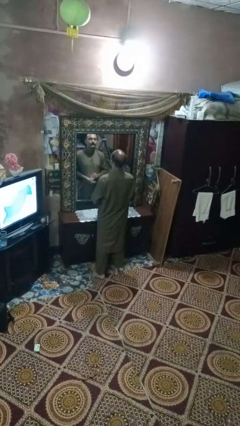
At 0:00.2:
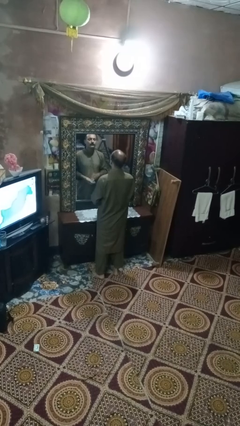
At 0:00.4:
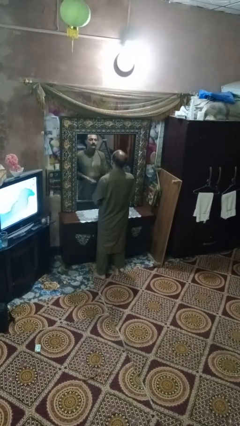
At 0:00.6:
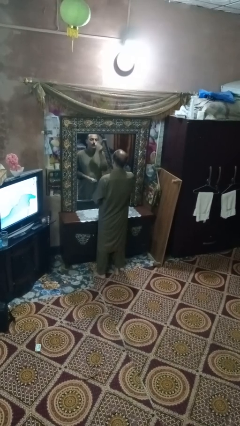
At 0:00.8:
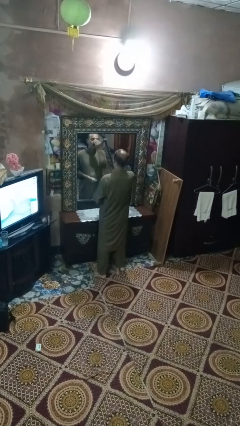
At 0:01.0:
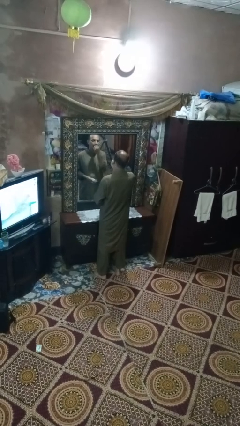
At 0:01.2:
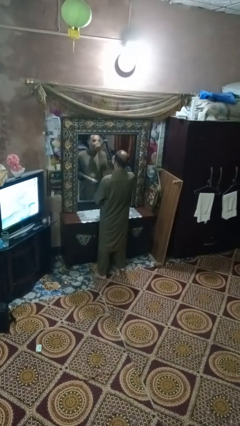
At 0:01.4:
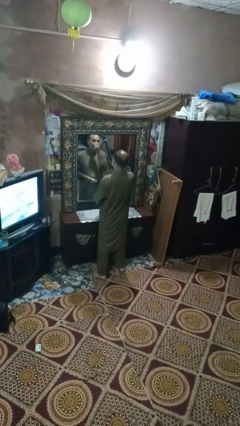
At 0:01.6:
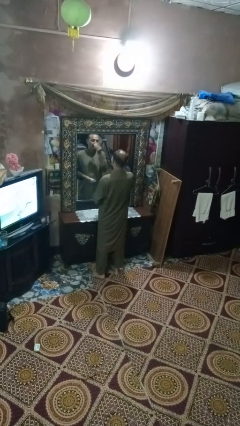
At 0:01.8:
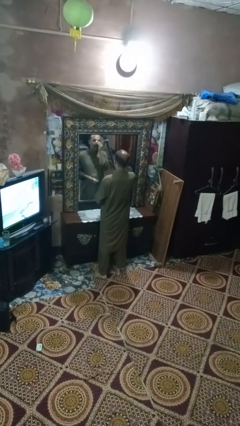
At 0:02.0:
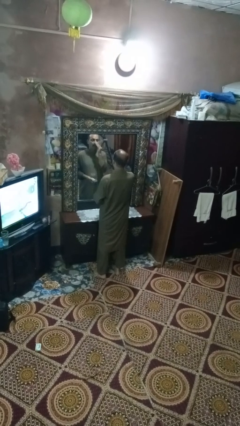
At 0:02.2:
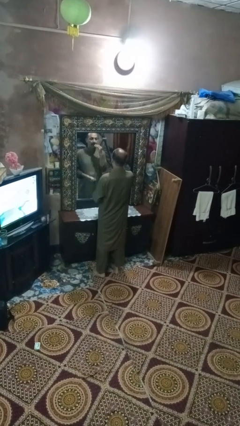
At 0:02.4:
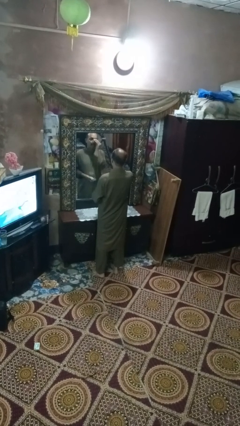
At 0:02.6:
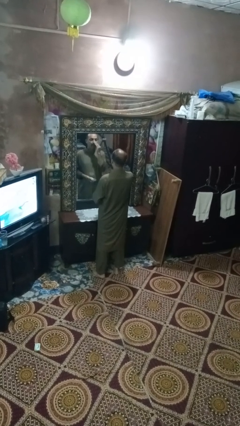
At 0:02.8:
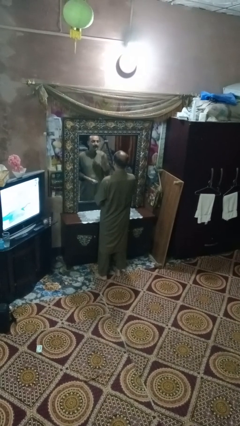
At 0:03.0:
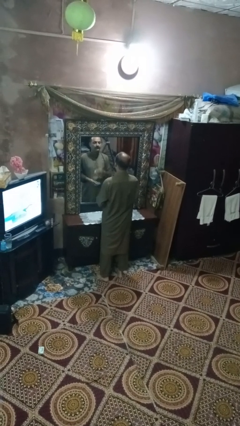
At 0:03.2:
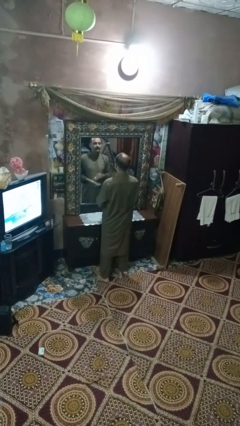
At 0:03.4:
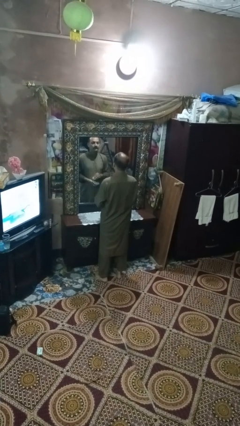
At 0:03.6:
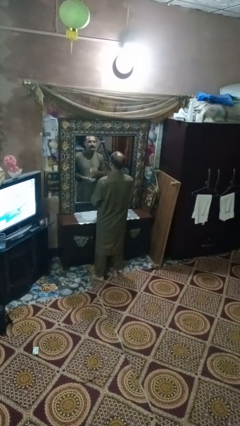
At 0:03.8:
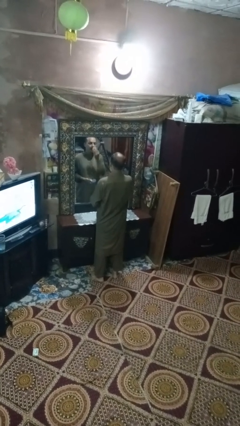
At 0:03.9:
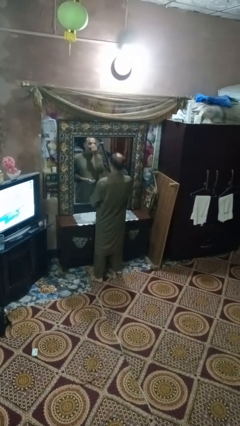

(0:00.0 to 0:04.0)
person applies foundation makeup

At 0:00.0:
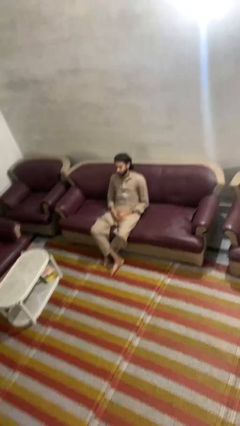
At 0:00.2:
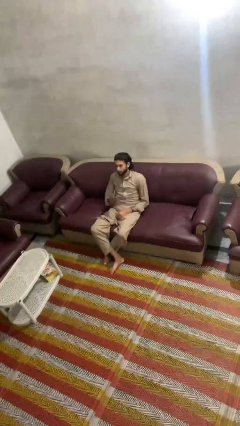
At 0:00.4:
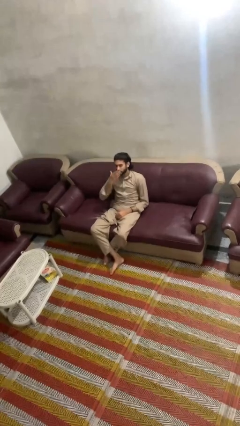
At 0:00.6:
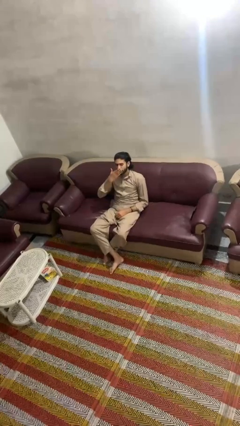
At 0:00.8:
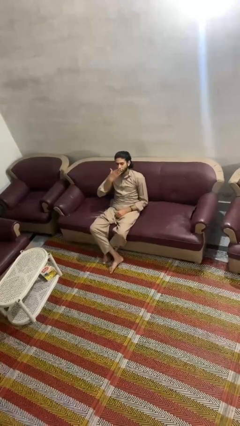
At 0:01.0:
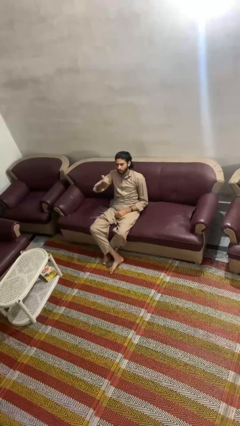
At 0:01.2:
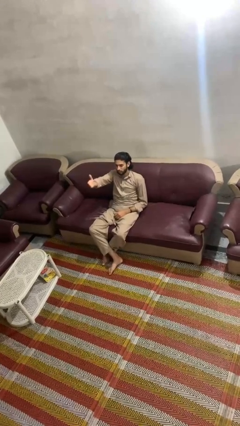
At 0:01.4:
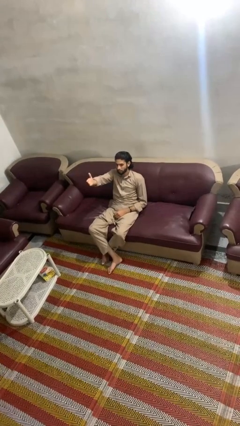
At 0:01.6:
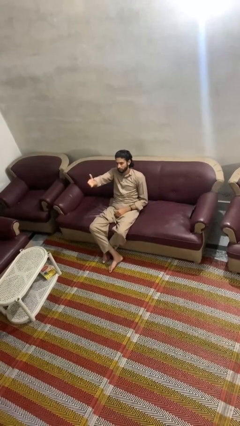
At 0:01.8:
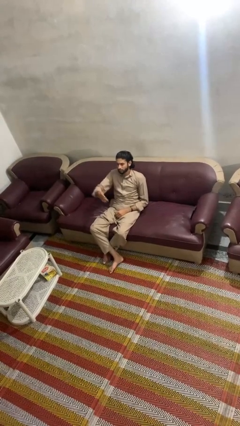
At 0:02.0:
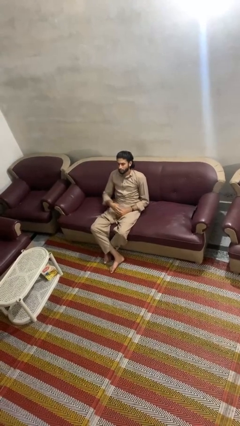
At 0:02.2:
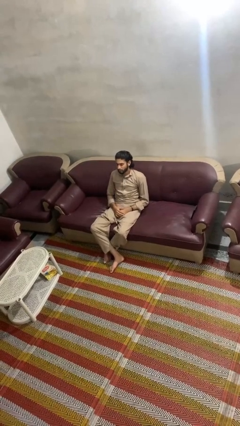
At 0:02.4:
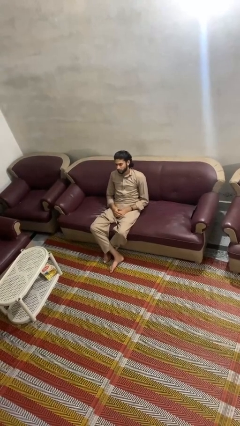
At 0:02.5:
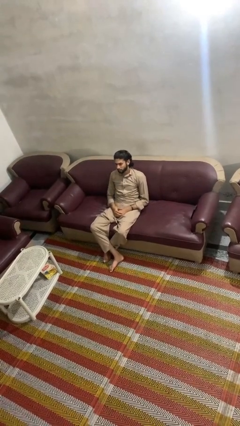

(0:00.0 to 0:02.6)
person gestures blow kiss

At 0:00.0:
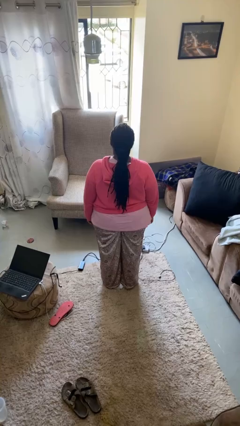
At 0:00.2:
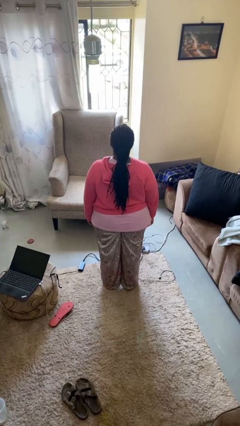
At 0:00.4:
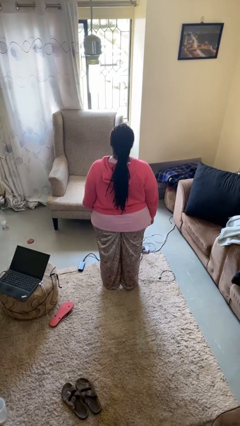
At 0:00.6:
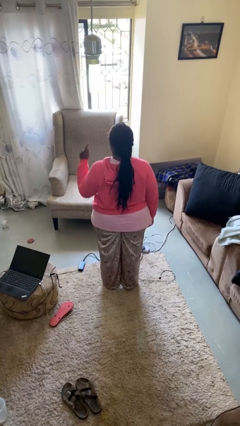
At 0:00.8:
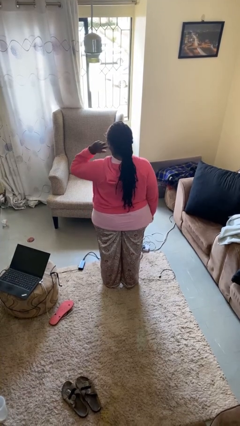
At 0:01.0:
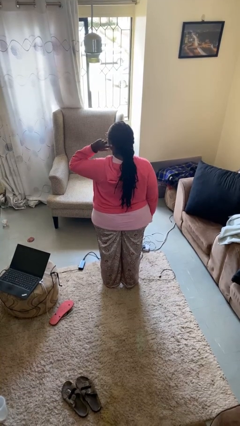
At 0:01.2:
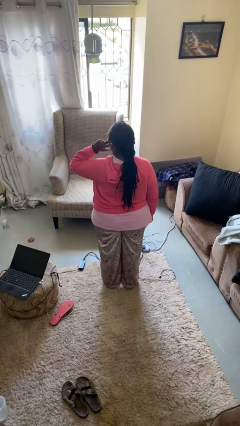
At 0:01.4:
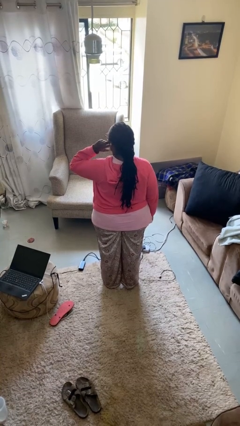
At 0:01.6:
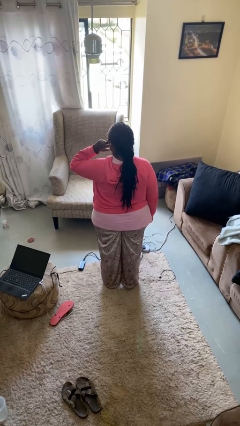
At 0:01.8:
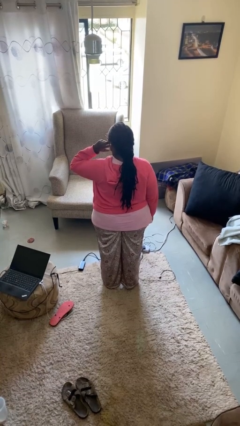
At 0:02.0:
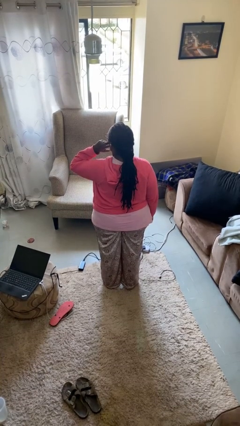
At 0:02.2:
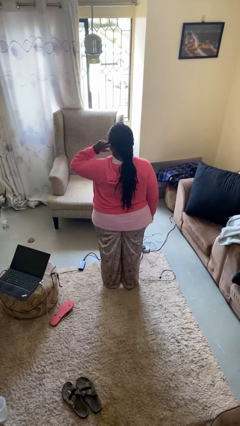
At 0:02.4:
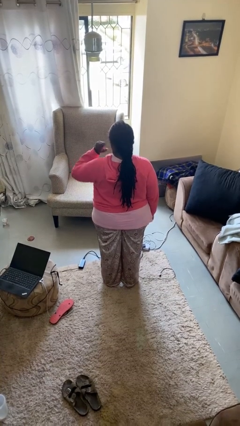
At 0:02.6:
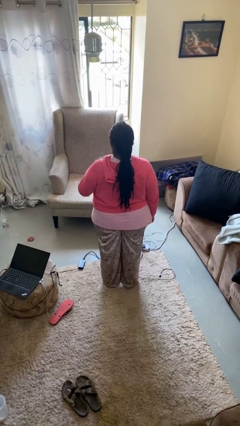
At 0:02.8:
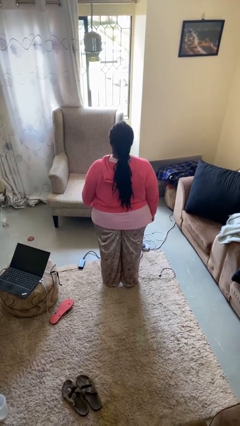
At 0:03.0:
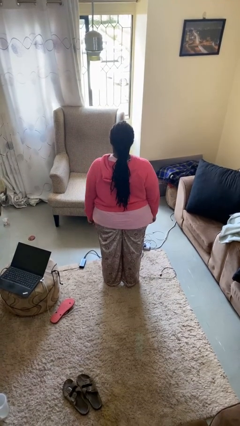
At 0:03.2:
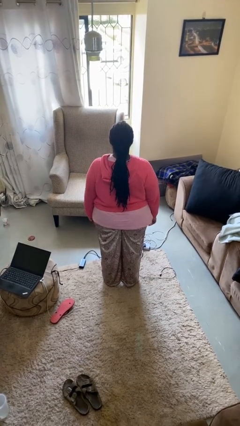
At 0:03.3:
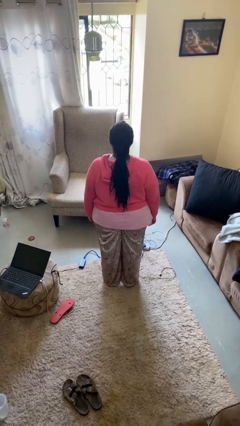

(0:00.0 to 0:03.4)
person gestures listen closely

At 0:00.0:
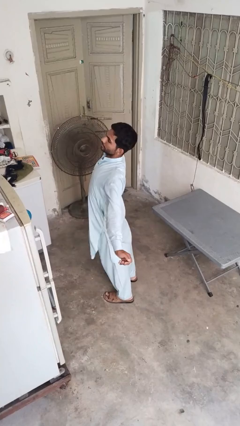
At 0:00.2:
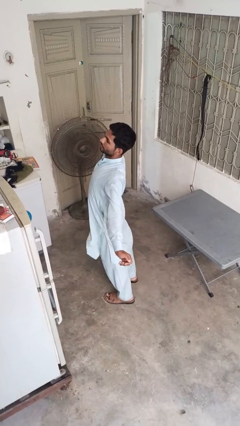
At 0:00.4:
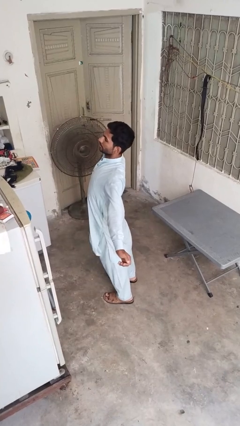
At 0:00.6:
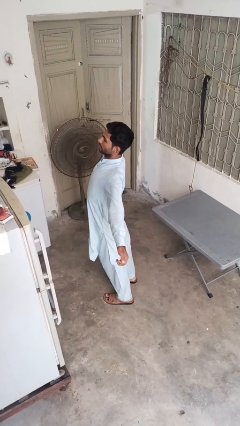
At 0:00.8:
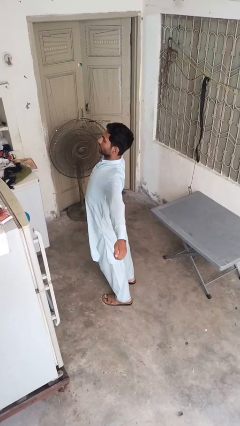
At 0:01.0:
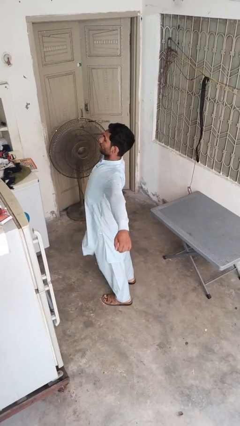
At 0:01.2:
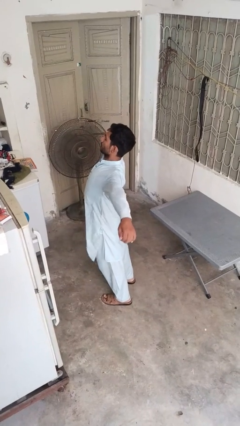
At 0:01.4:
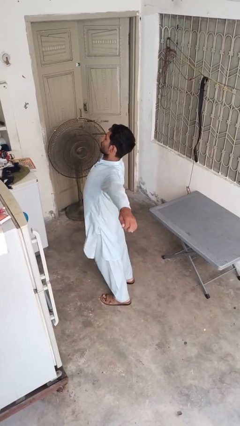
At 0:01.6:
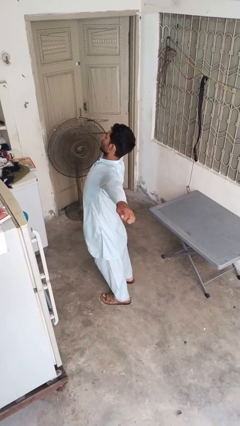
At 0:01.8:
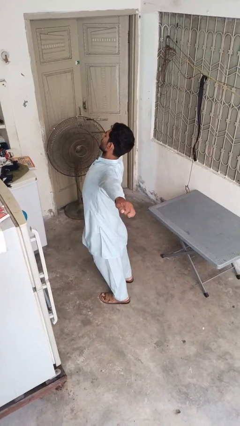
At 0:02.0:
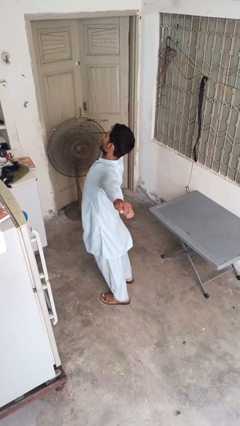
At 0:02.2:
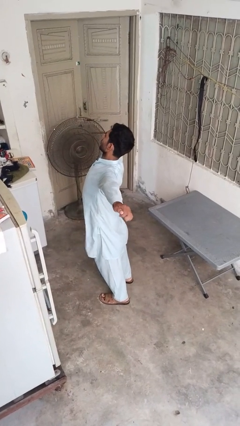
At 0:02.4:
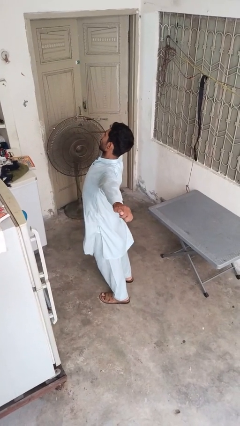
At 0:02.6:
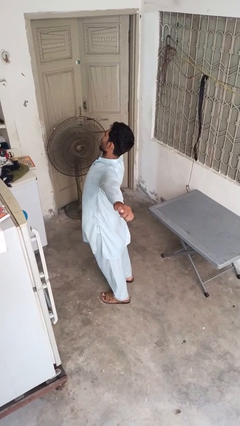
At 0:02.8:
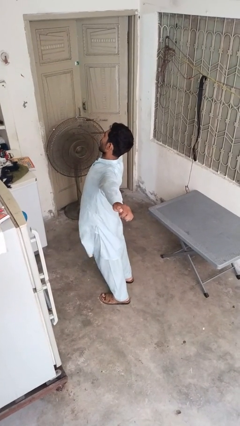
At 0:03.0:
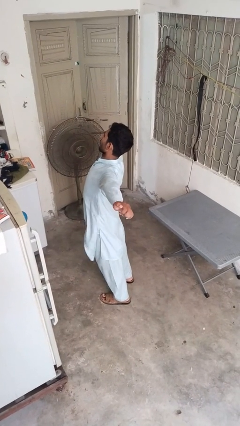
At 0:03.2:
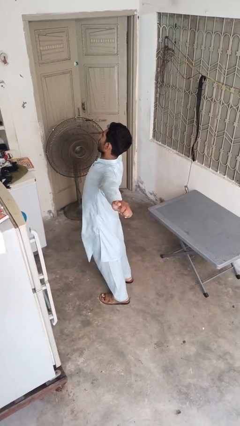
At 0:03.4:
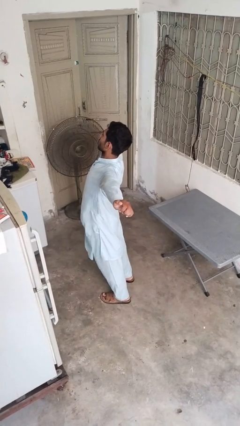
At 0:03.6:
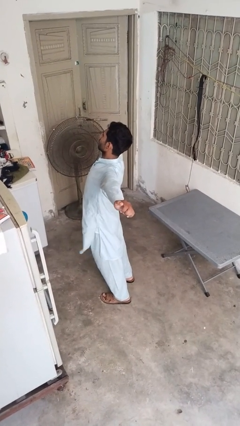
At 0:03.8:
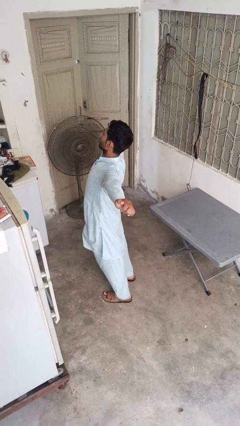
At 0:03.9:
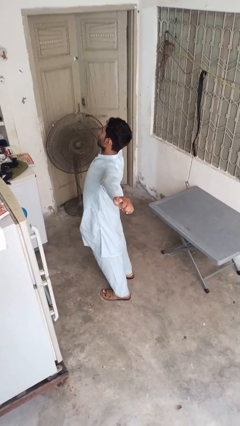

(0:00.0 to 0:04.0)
person stretches arms to side

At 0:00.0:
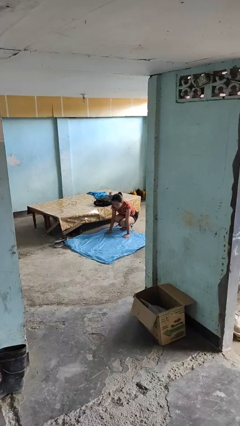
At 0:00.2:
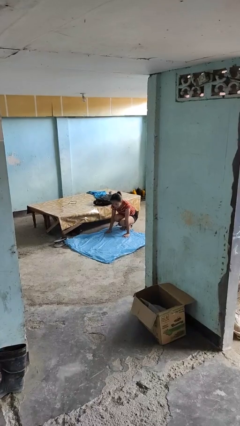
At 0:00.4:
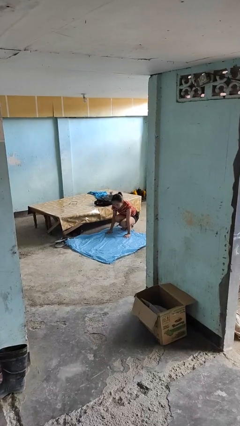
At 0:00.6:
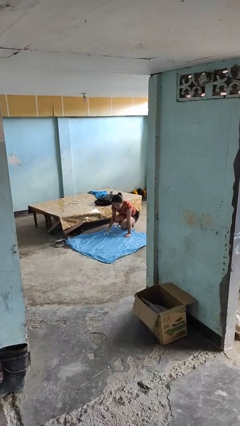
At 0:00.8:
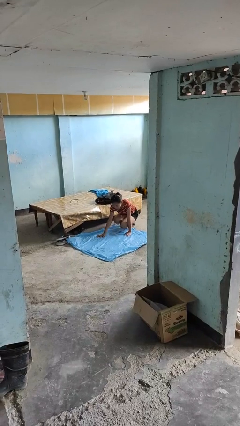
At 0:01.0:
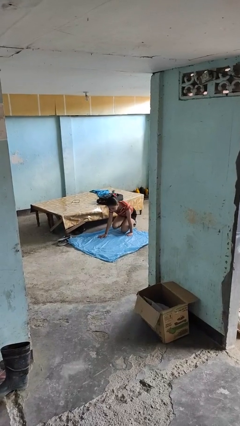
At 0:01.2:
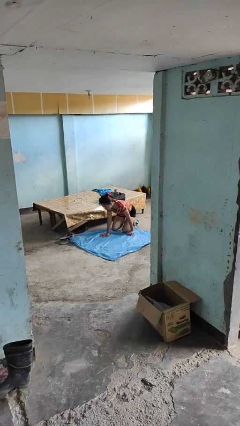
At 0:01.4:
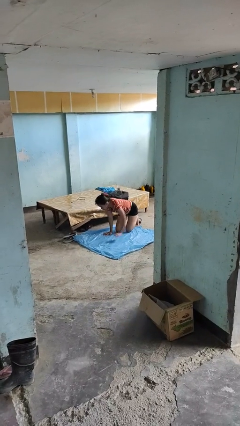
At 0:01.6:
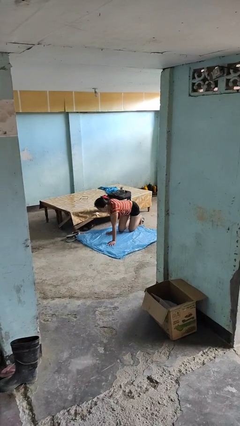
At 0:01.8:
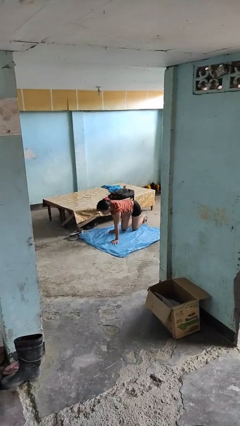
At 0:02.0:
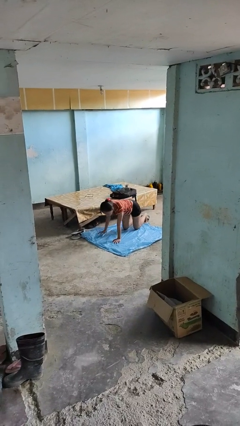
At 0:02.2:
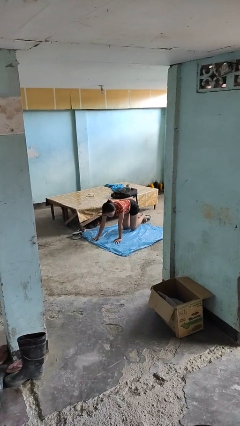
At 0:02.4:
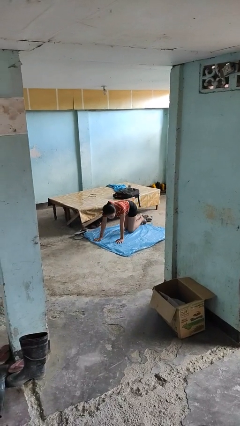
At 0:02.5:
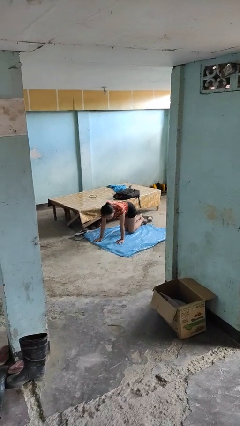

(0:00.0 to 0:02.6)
person crawls

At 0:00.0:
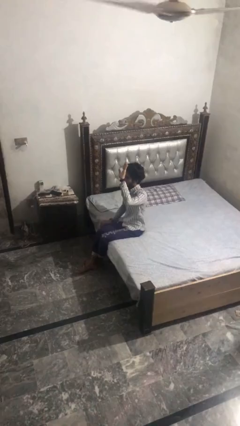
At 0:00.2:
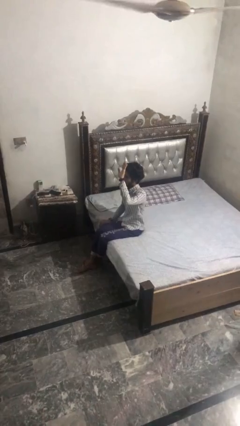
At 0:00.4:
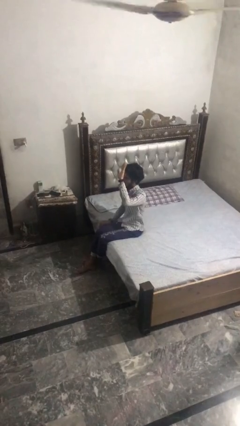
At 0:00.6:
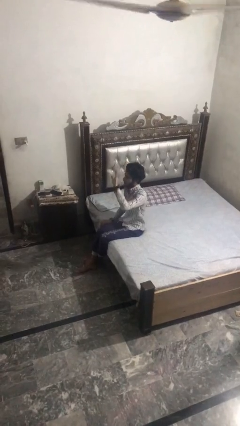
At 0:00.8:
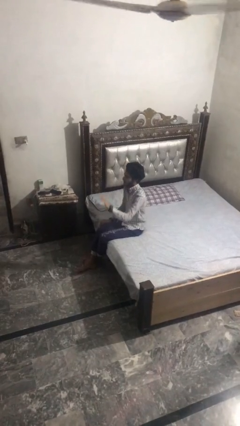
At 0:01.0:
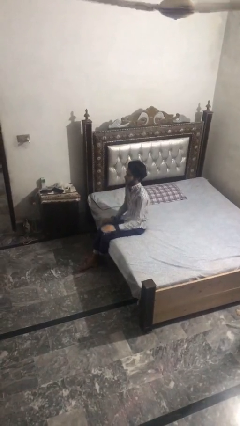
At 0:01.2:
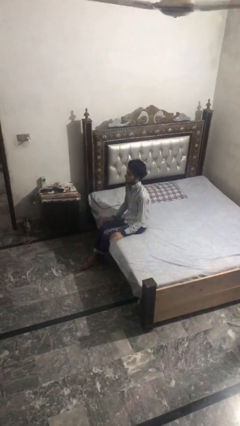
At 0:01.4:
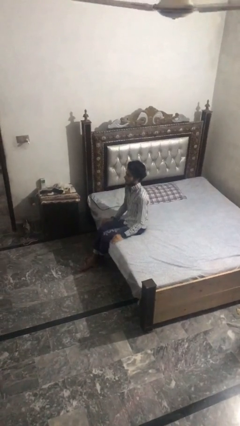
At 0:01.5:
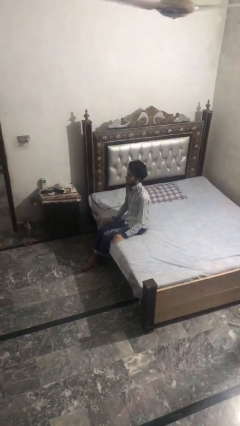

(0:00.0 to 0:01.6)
person gestures lower hand
